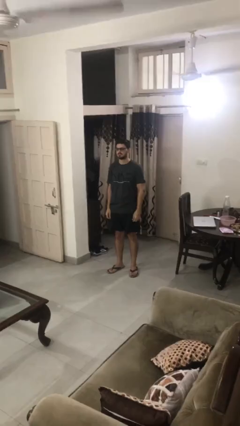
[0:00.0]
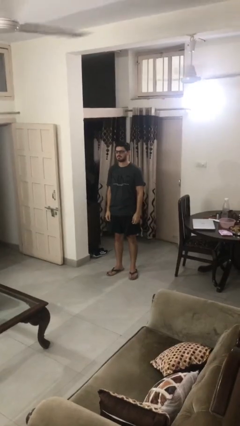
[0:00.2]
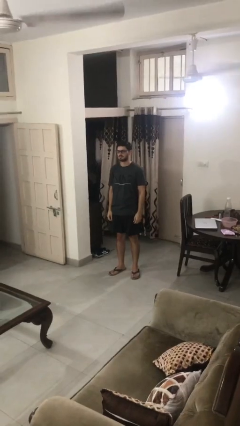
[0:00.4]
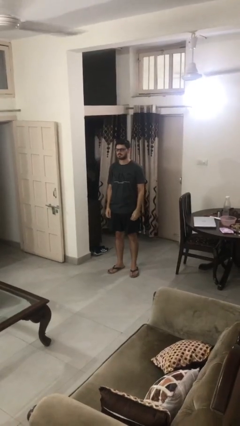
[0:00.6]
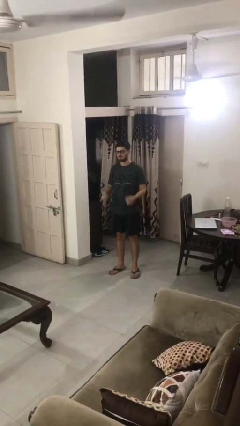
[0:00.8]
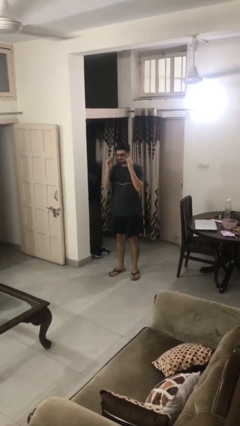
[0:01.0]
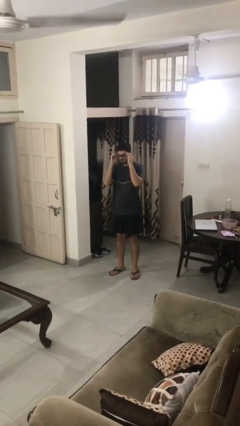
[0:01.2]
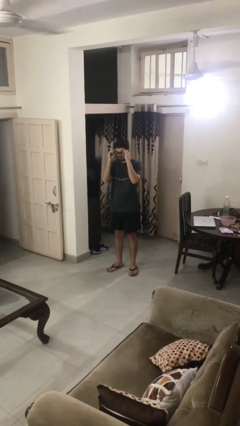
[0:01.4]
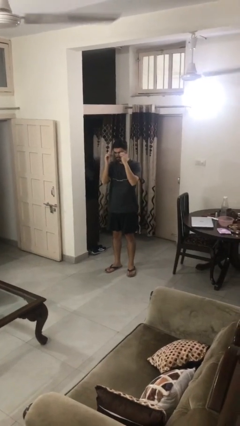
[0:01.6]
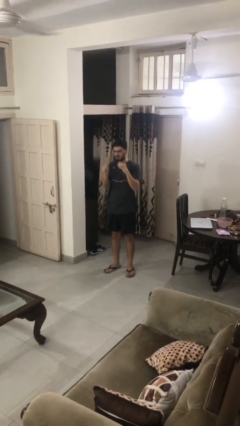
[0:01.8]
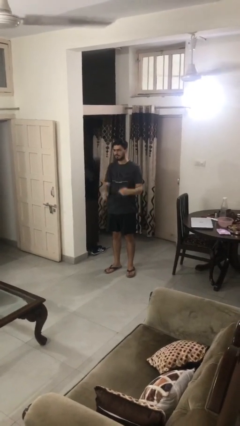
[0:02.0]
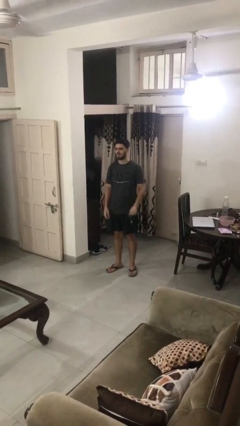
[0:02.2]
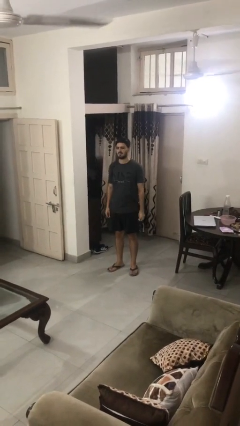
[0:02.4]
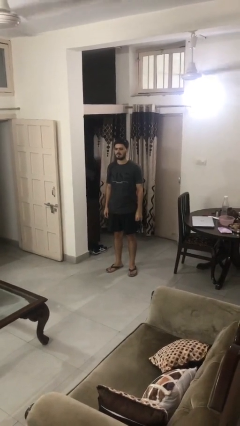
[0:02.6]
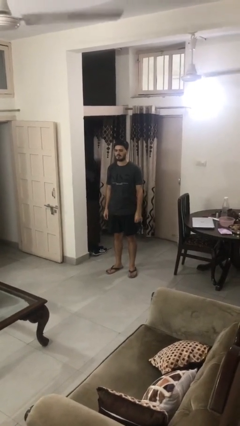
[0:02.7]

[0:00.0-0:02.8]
person takes off glasses

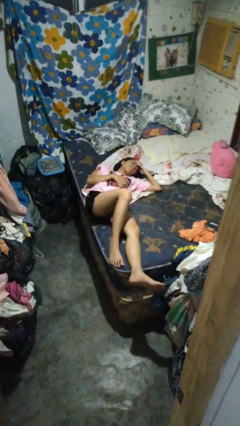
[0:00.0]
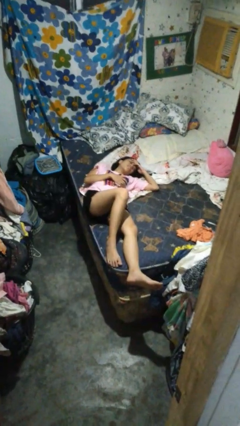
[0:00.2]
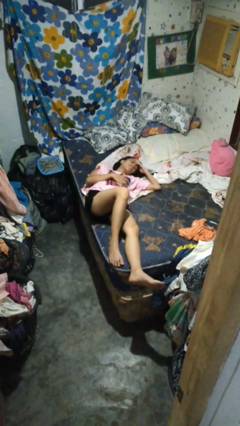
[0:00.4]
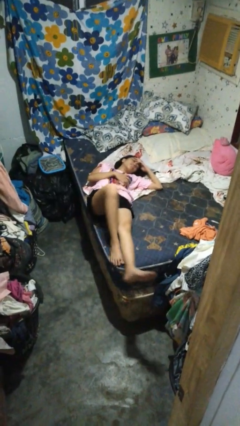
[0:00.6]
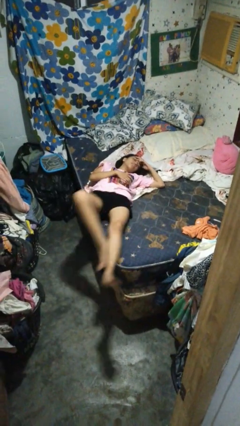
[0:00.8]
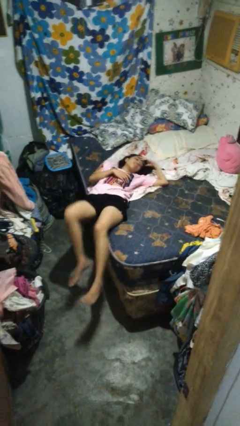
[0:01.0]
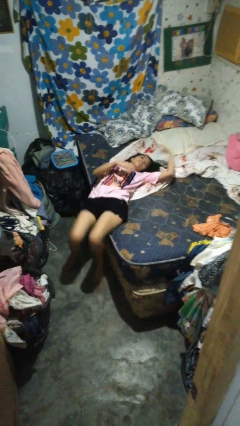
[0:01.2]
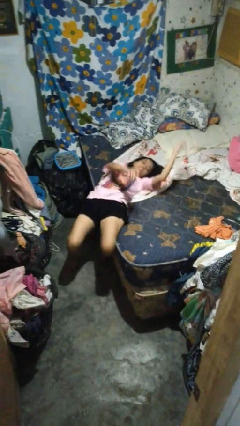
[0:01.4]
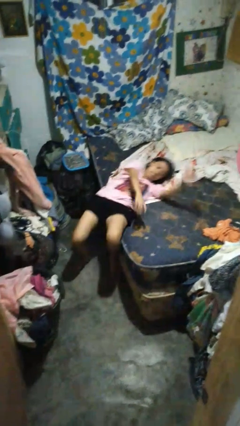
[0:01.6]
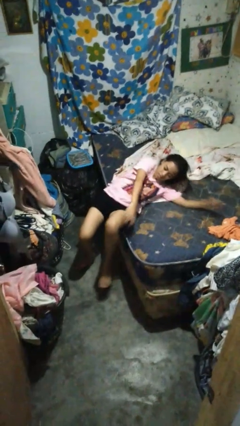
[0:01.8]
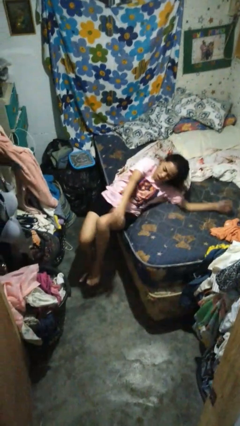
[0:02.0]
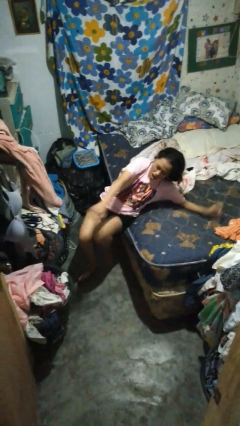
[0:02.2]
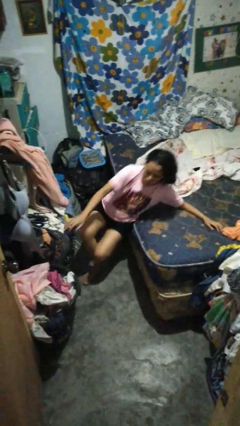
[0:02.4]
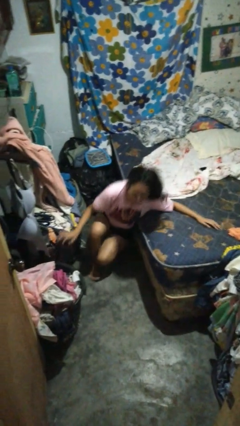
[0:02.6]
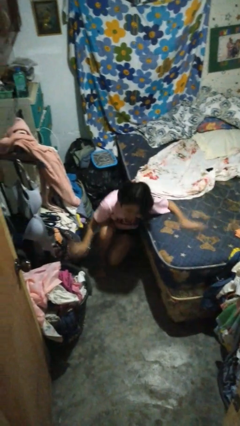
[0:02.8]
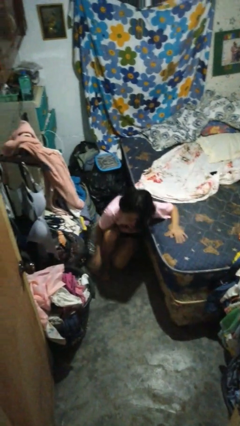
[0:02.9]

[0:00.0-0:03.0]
person falls from bed

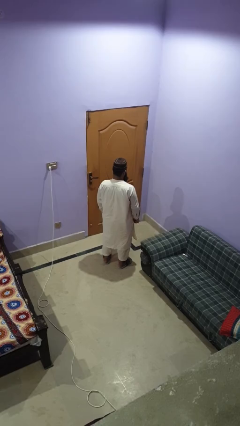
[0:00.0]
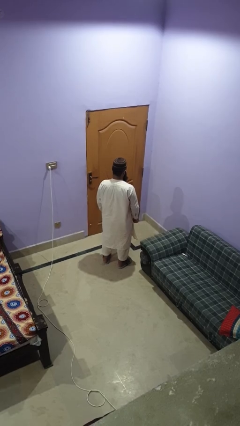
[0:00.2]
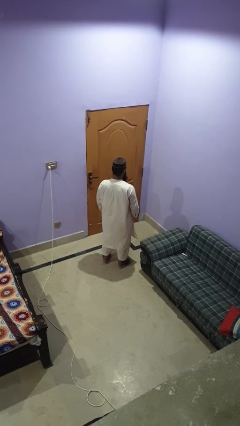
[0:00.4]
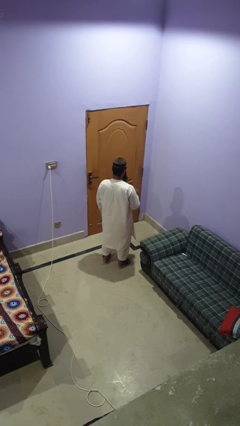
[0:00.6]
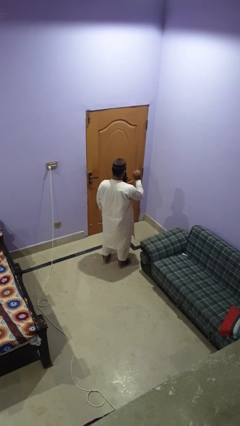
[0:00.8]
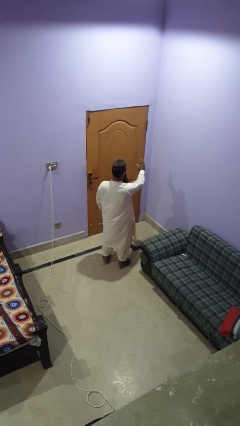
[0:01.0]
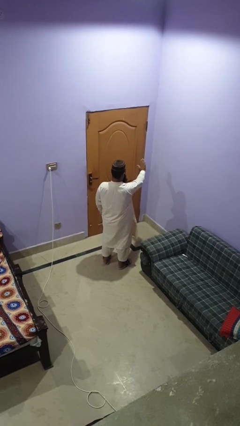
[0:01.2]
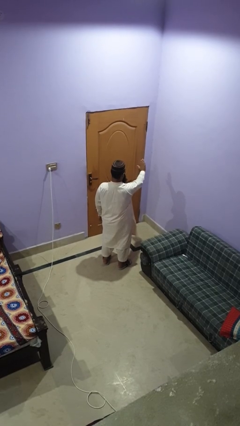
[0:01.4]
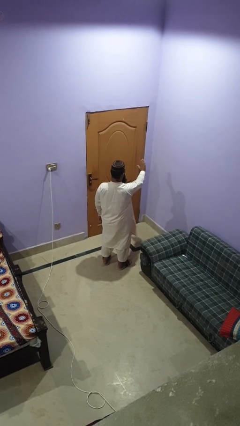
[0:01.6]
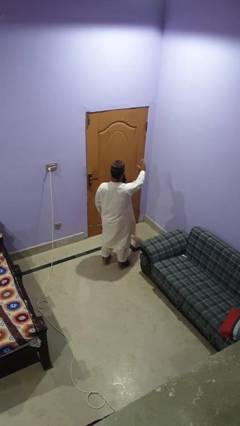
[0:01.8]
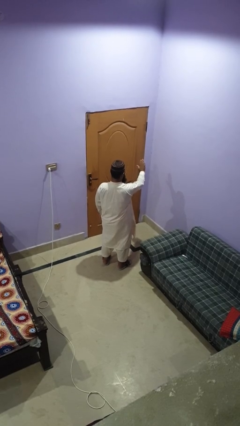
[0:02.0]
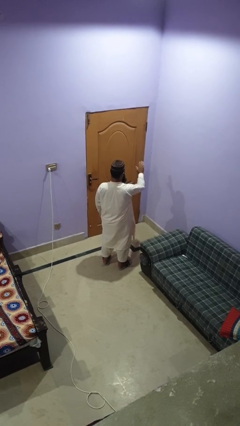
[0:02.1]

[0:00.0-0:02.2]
person gestures stop

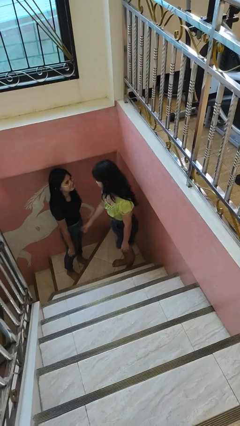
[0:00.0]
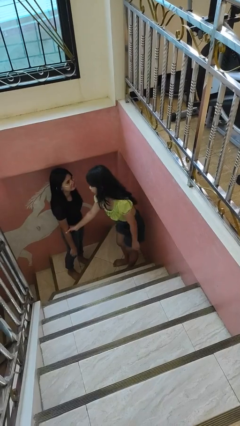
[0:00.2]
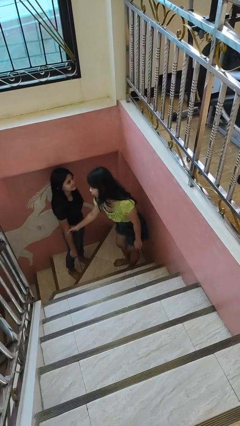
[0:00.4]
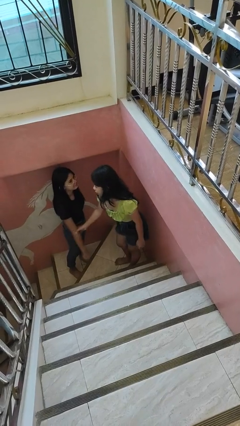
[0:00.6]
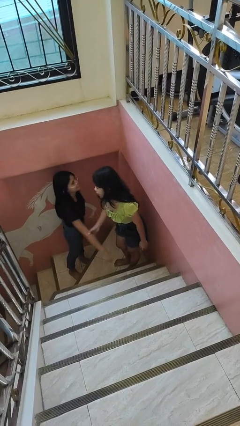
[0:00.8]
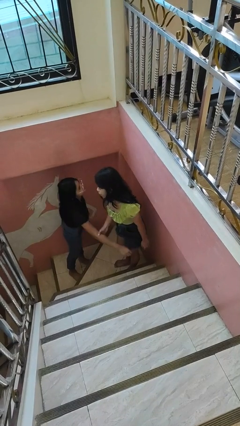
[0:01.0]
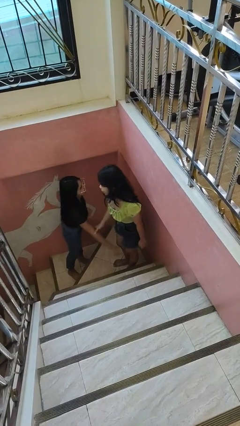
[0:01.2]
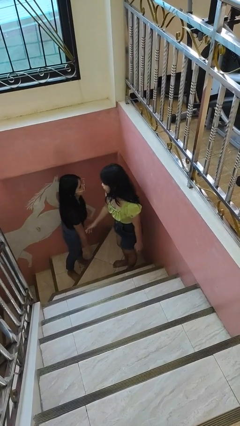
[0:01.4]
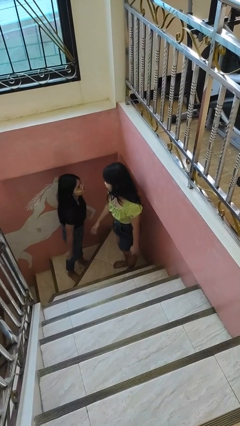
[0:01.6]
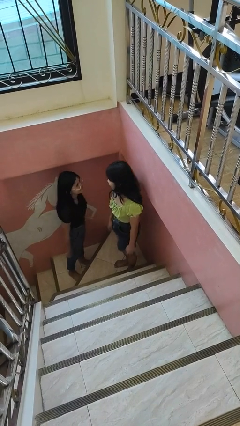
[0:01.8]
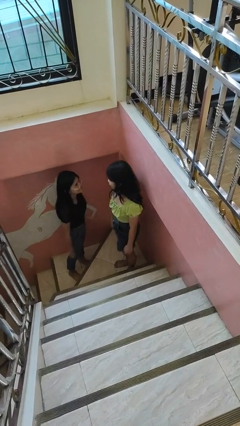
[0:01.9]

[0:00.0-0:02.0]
person grabs person by forearm

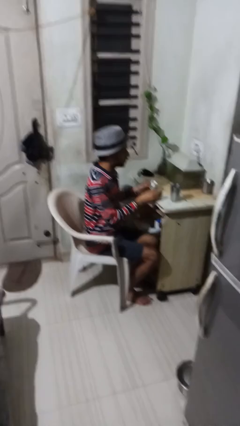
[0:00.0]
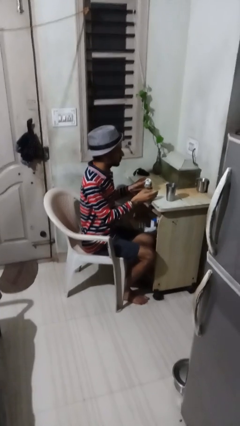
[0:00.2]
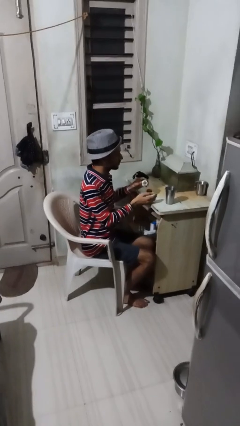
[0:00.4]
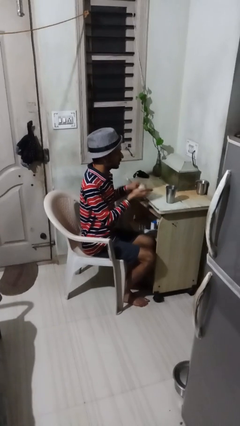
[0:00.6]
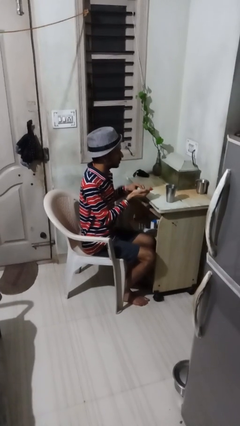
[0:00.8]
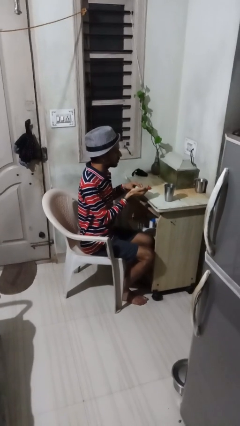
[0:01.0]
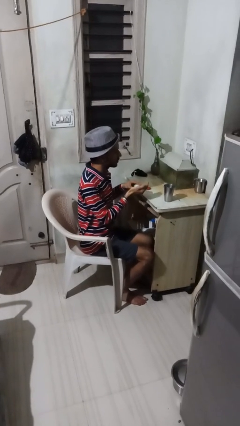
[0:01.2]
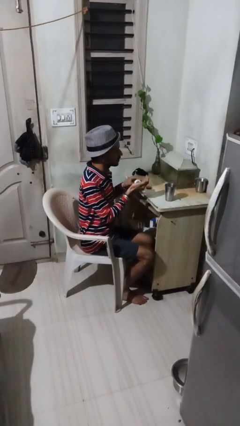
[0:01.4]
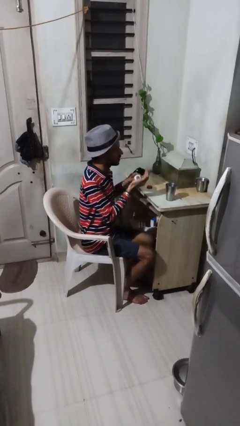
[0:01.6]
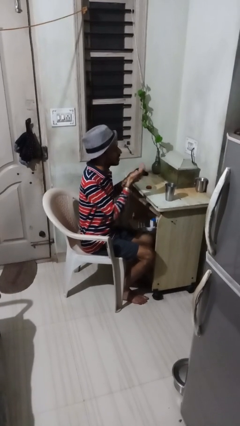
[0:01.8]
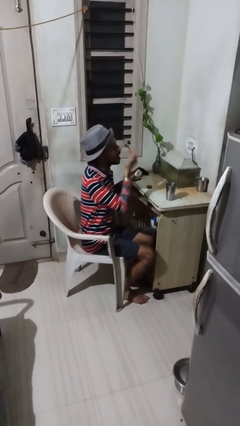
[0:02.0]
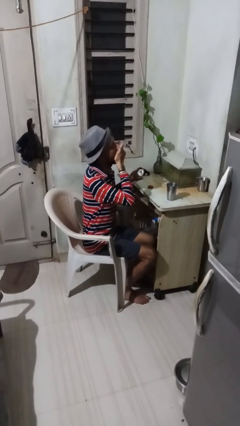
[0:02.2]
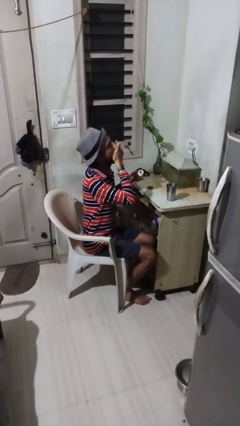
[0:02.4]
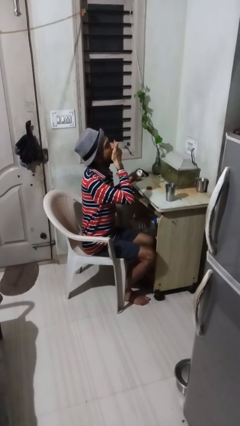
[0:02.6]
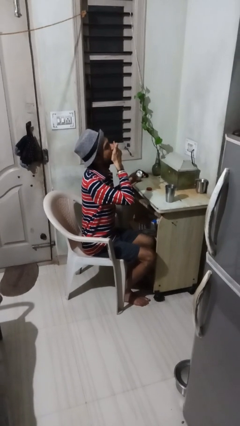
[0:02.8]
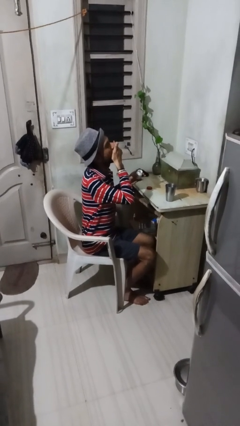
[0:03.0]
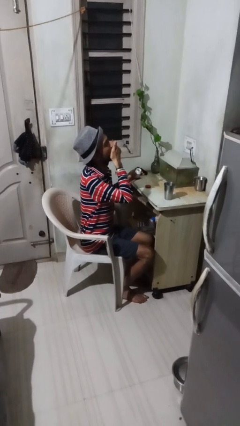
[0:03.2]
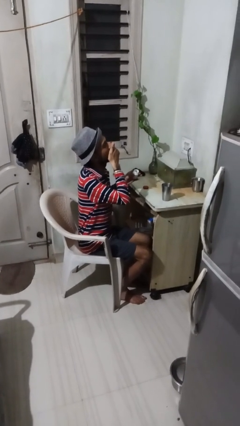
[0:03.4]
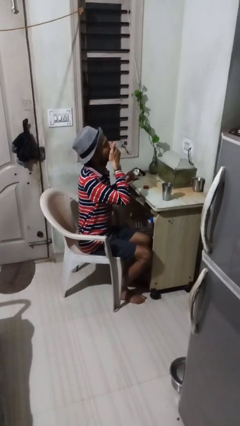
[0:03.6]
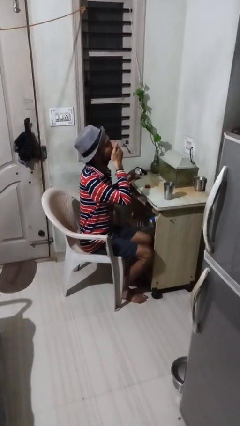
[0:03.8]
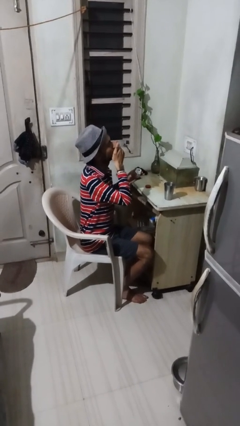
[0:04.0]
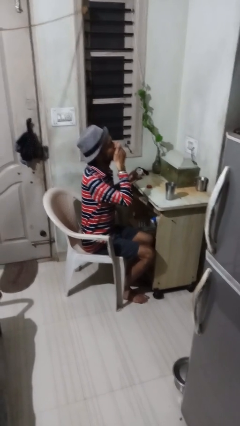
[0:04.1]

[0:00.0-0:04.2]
person takes medicine pills

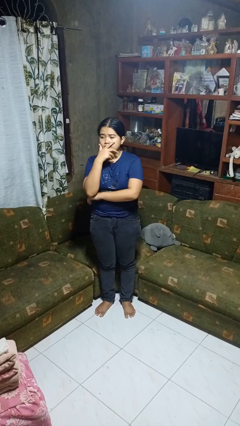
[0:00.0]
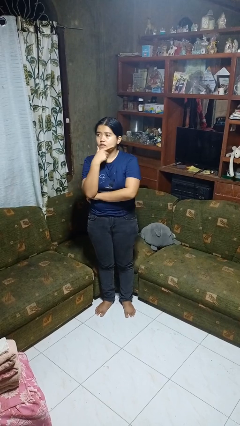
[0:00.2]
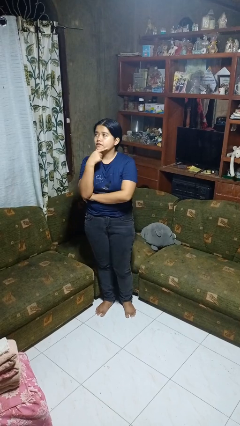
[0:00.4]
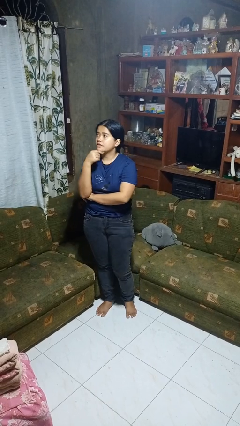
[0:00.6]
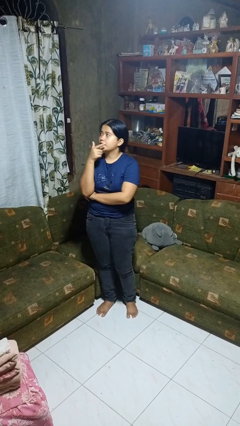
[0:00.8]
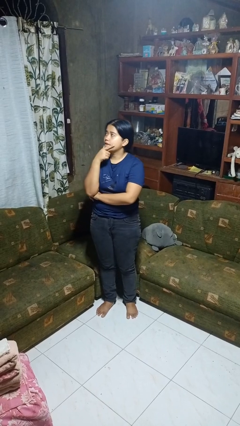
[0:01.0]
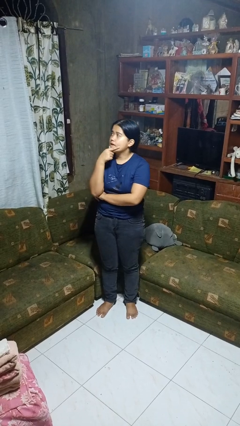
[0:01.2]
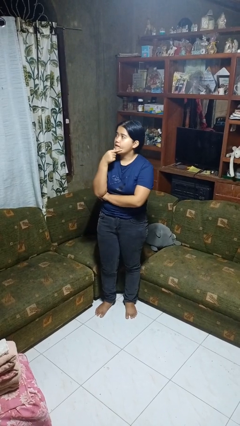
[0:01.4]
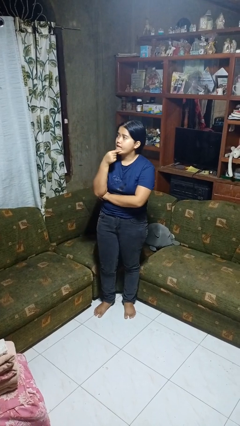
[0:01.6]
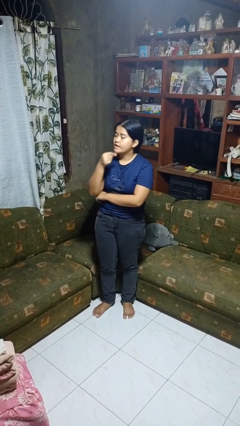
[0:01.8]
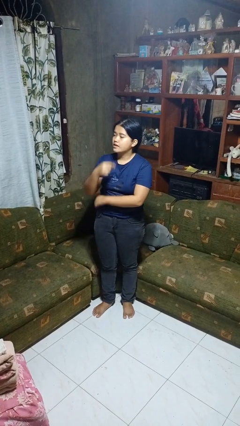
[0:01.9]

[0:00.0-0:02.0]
person strokes chin

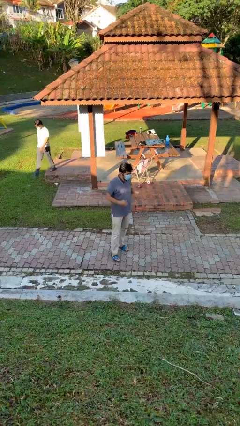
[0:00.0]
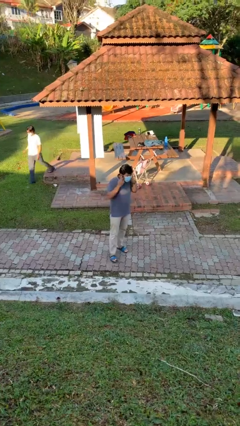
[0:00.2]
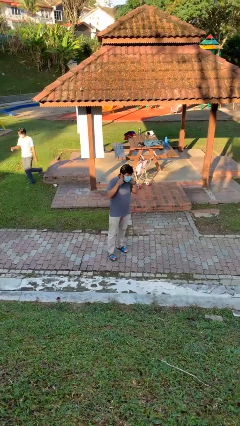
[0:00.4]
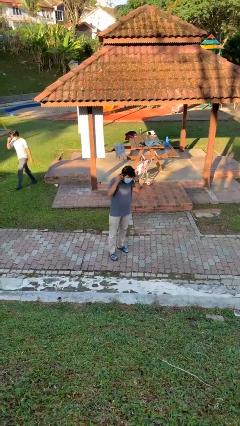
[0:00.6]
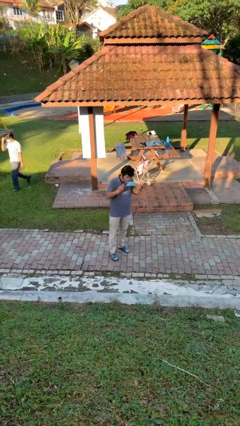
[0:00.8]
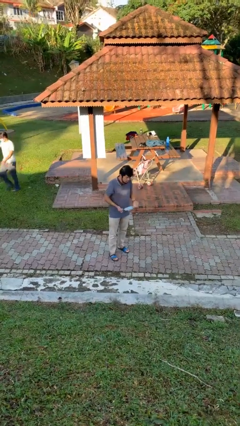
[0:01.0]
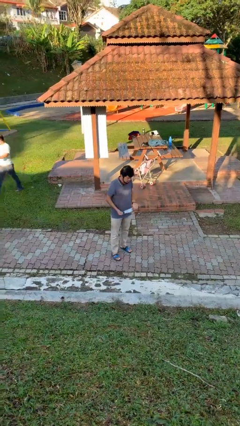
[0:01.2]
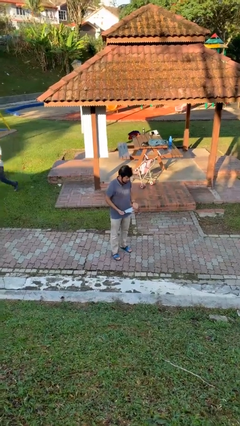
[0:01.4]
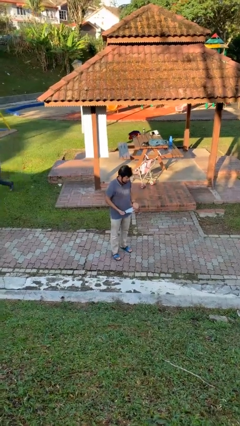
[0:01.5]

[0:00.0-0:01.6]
person takes off facemask
